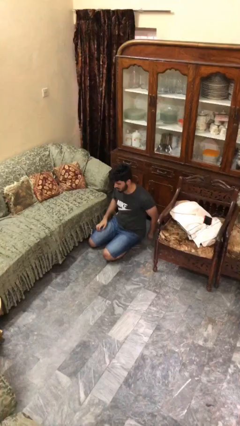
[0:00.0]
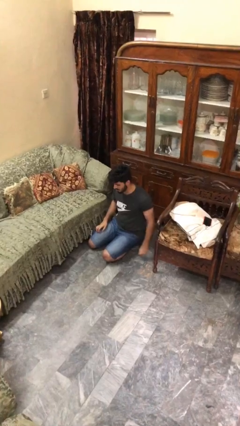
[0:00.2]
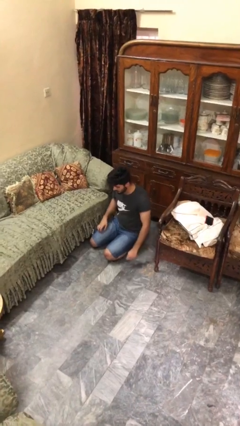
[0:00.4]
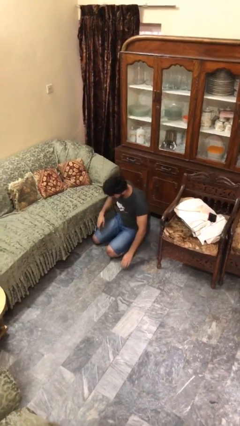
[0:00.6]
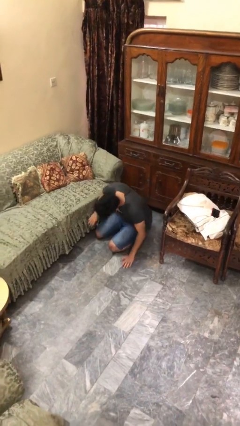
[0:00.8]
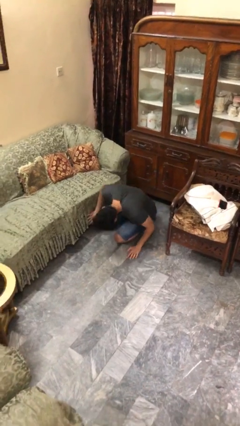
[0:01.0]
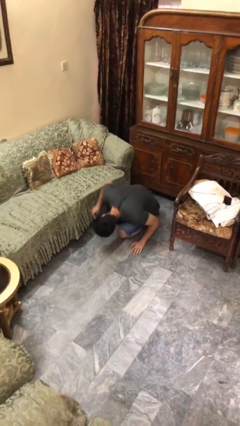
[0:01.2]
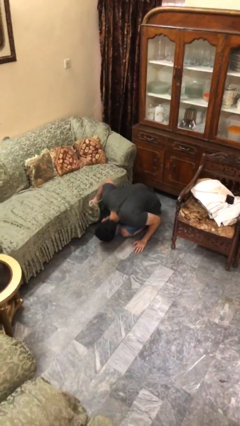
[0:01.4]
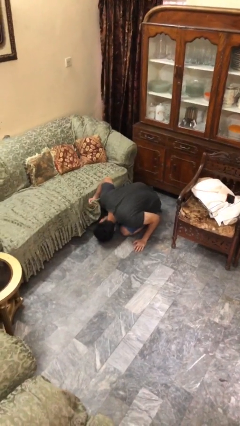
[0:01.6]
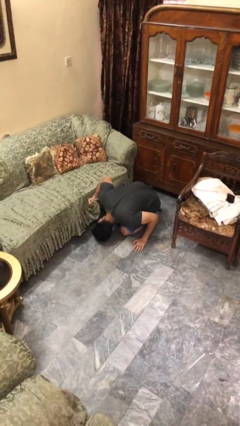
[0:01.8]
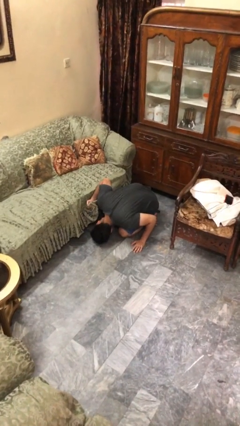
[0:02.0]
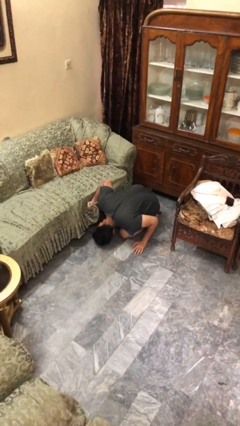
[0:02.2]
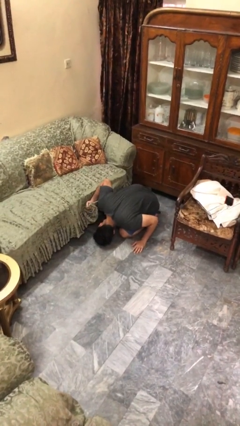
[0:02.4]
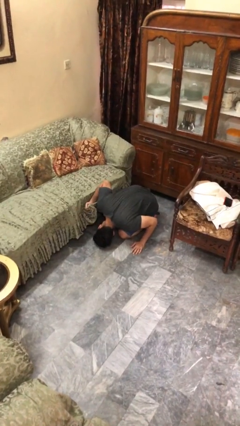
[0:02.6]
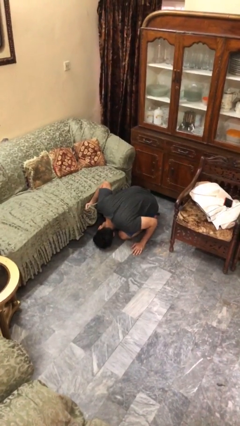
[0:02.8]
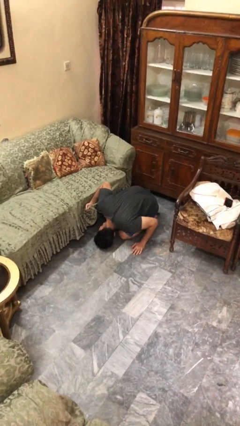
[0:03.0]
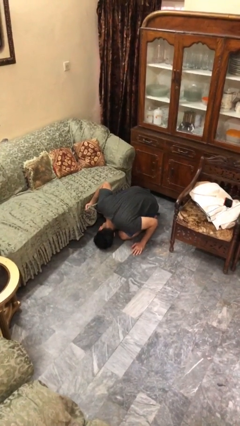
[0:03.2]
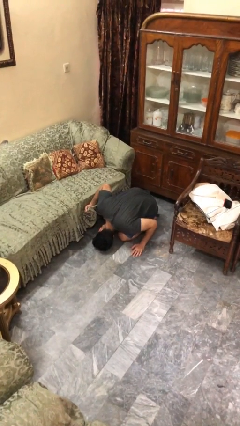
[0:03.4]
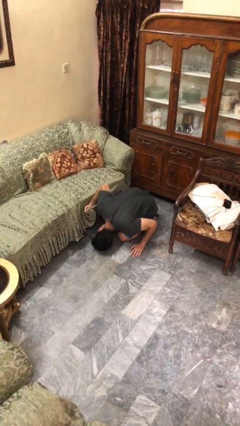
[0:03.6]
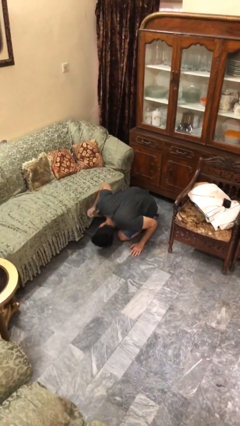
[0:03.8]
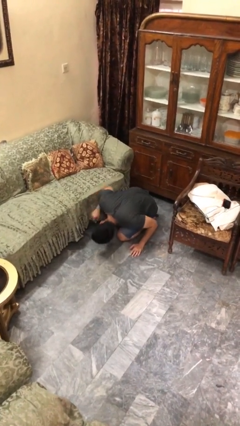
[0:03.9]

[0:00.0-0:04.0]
person searches under couch

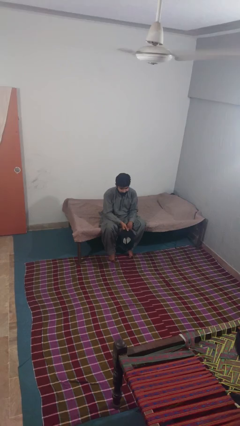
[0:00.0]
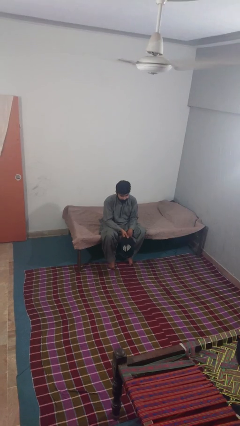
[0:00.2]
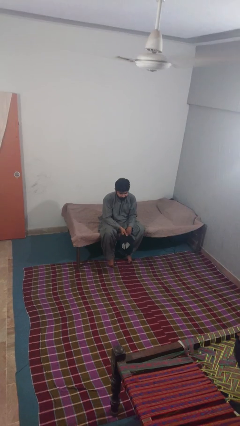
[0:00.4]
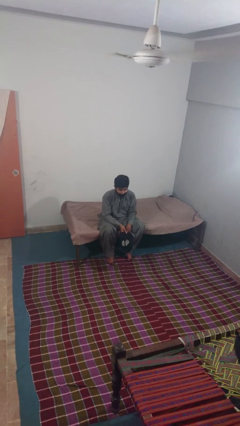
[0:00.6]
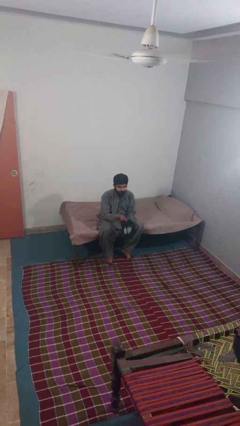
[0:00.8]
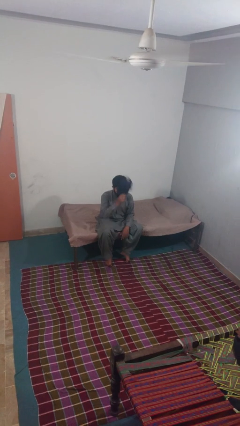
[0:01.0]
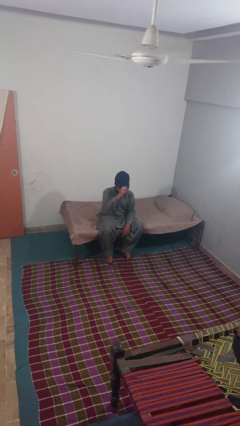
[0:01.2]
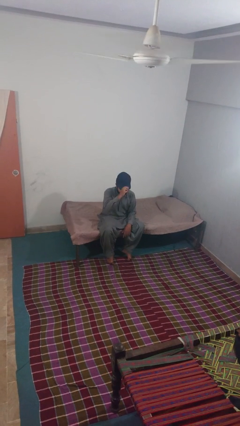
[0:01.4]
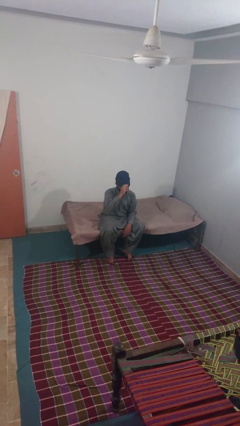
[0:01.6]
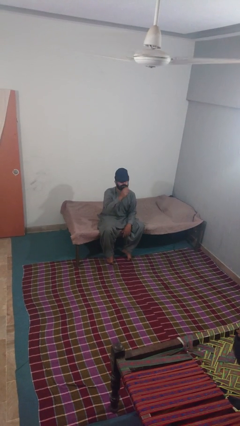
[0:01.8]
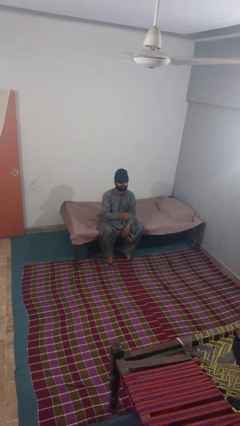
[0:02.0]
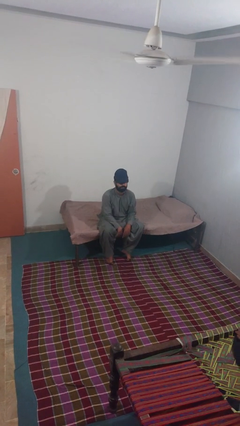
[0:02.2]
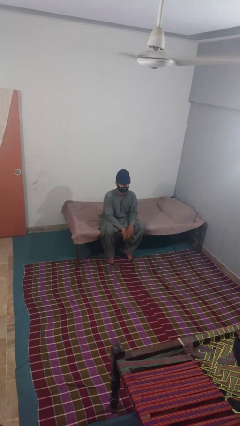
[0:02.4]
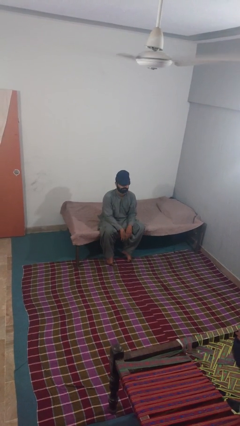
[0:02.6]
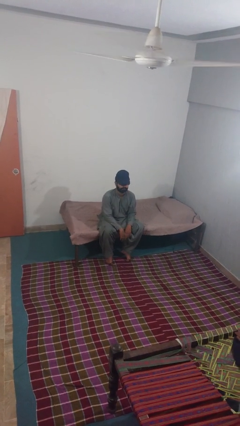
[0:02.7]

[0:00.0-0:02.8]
person puts on hat

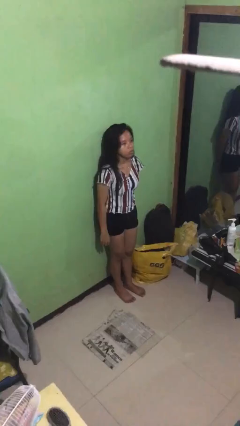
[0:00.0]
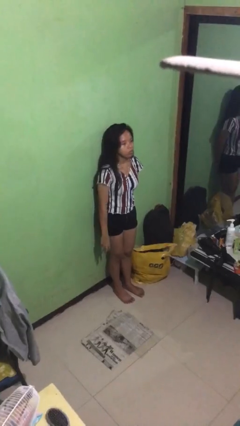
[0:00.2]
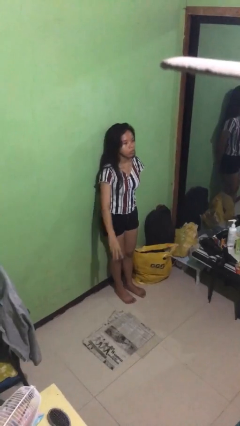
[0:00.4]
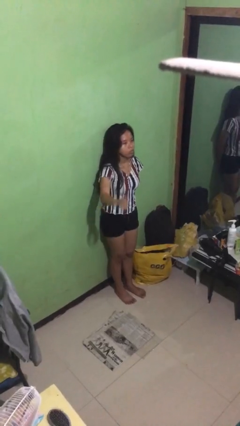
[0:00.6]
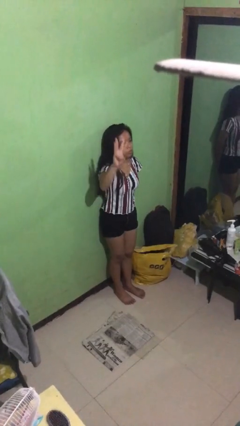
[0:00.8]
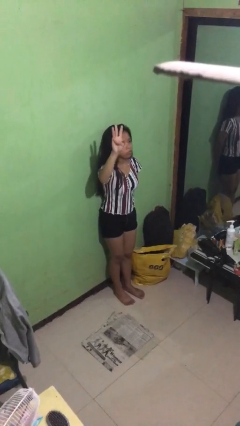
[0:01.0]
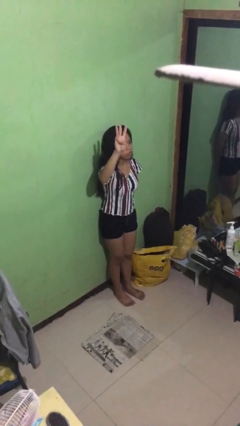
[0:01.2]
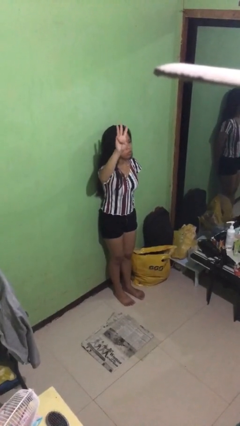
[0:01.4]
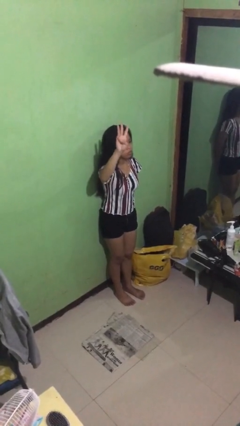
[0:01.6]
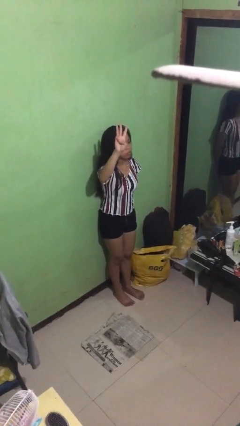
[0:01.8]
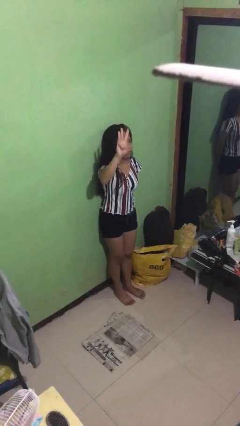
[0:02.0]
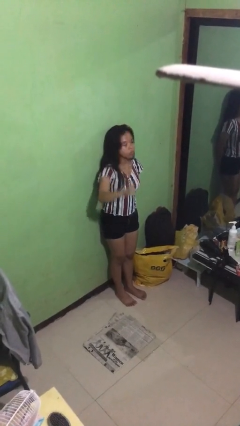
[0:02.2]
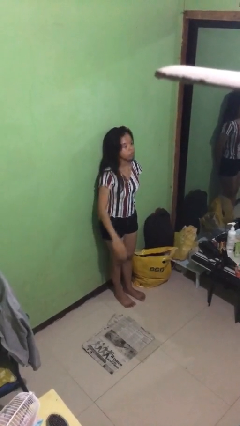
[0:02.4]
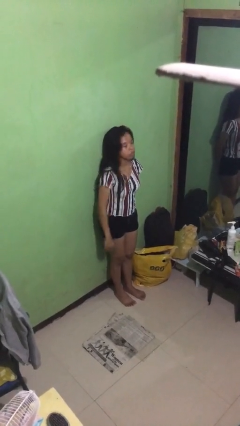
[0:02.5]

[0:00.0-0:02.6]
person gestures number three

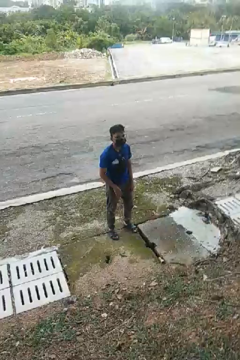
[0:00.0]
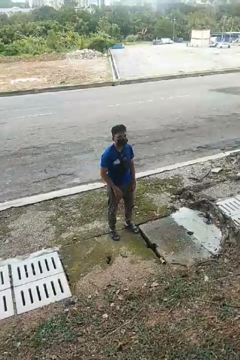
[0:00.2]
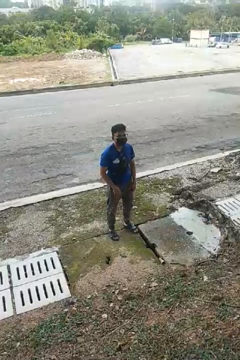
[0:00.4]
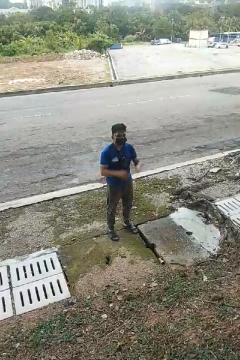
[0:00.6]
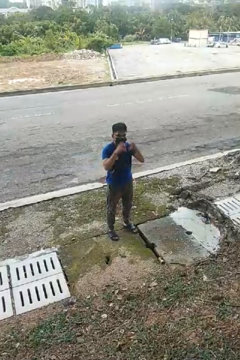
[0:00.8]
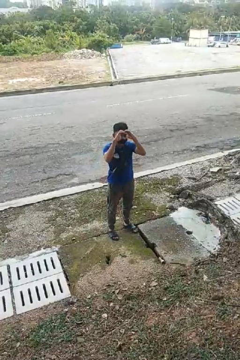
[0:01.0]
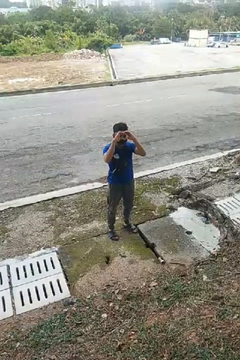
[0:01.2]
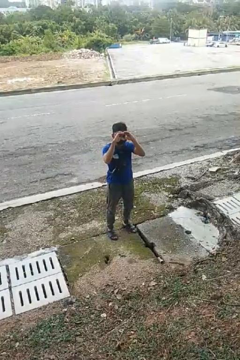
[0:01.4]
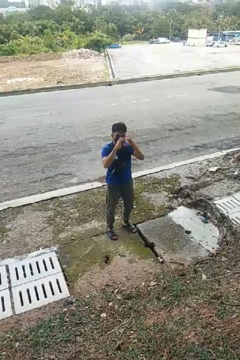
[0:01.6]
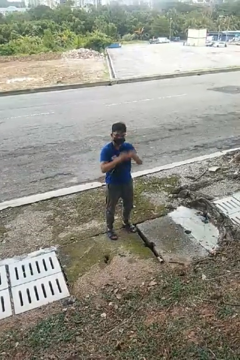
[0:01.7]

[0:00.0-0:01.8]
person gestures heart

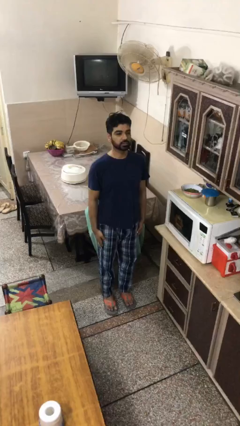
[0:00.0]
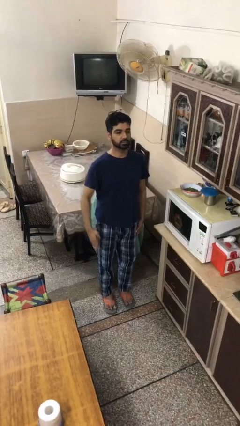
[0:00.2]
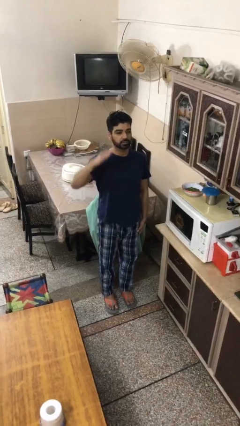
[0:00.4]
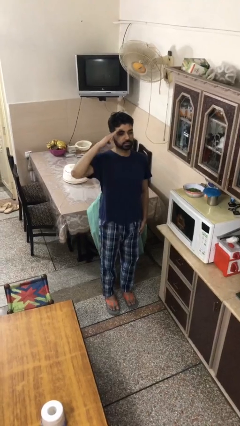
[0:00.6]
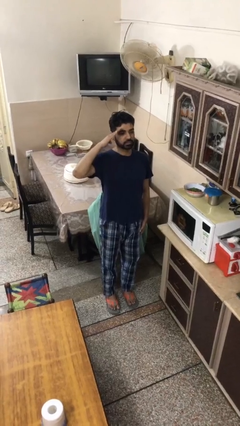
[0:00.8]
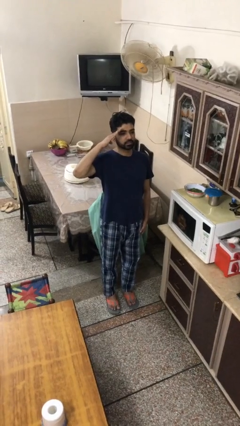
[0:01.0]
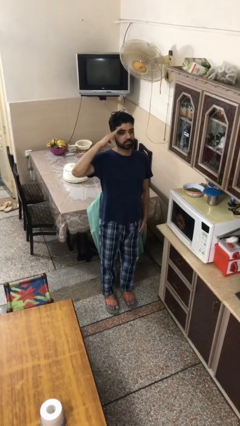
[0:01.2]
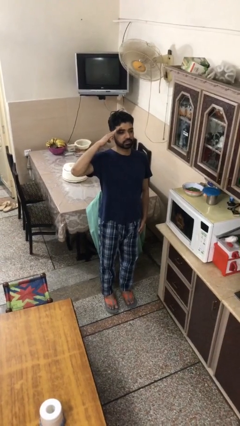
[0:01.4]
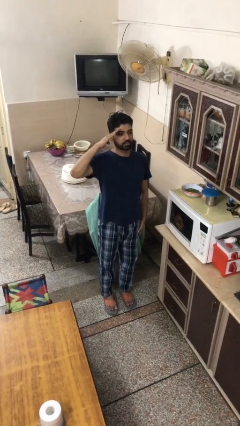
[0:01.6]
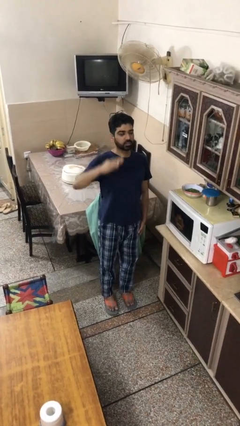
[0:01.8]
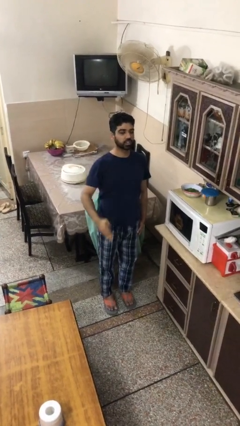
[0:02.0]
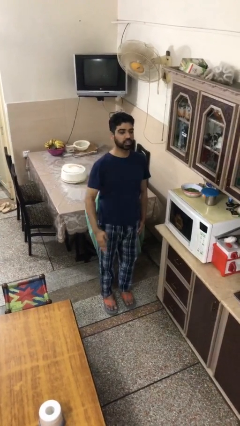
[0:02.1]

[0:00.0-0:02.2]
person salutes

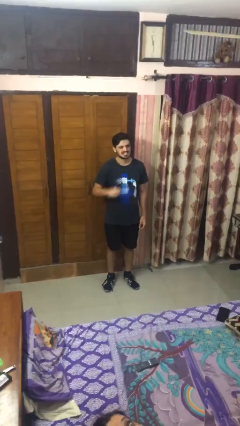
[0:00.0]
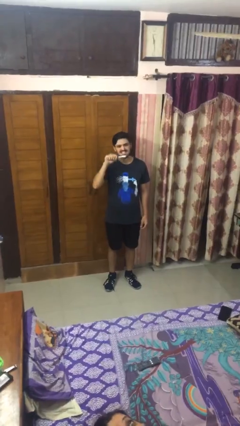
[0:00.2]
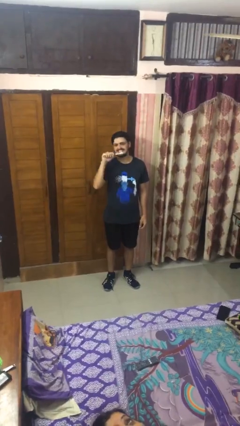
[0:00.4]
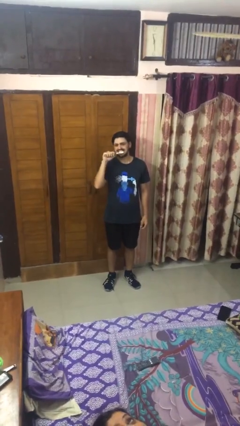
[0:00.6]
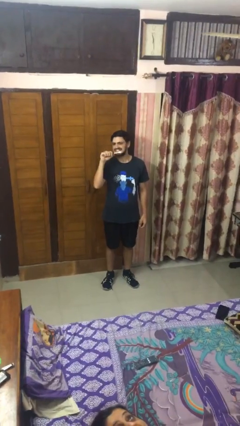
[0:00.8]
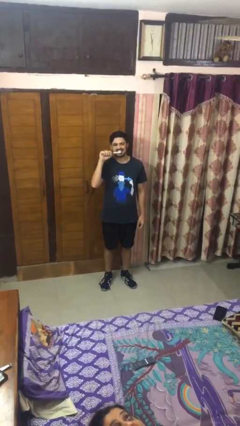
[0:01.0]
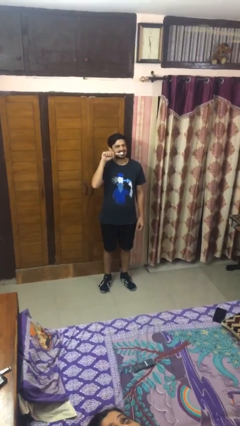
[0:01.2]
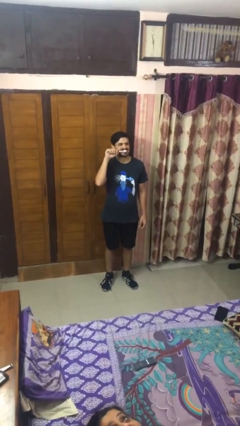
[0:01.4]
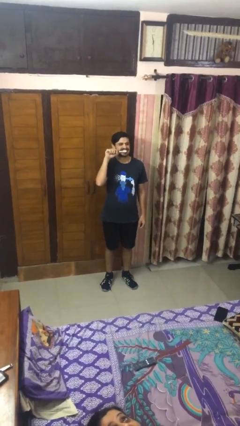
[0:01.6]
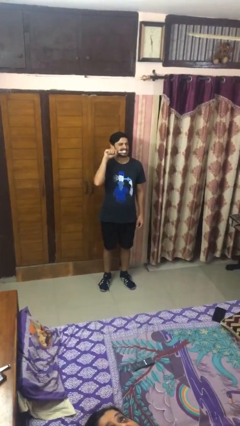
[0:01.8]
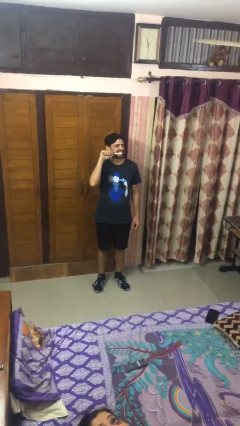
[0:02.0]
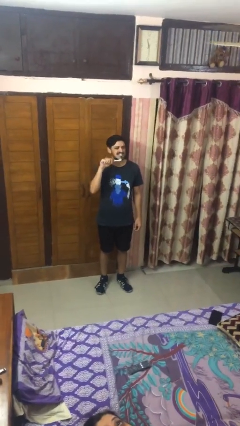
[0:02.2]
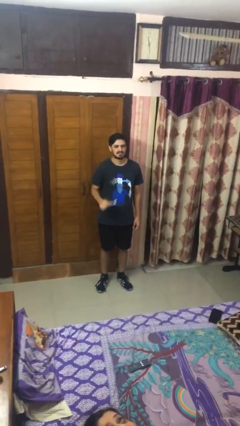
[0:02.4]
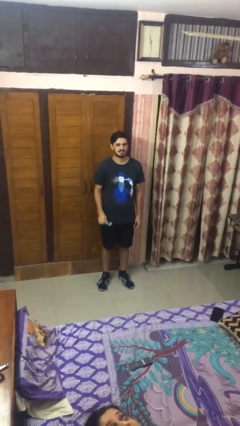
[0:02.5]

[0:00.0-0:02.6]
person brushes teeth

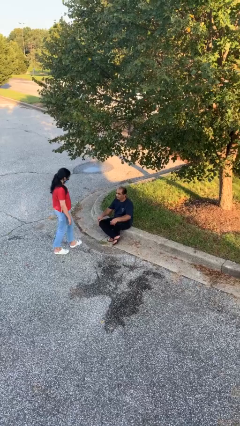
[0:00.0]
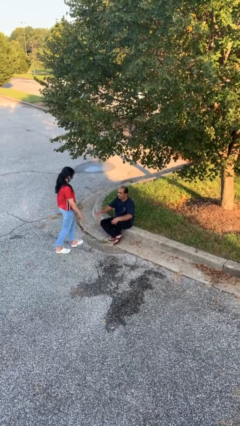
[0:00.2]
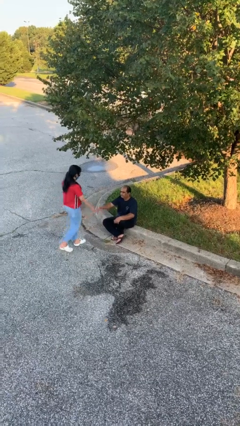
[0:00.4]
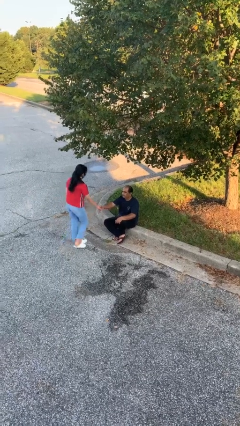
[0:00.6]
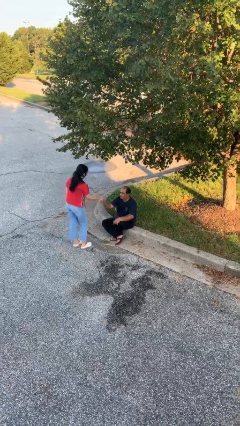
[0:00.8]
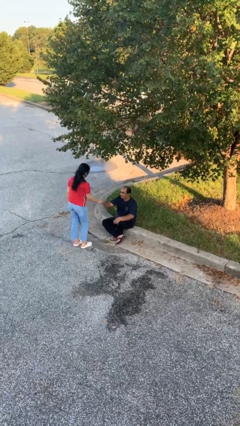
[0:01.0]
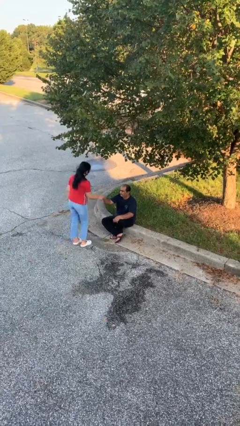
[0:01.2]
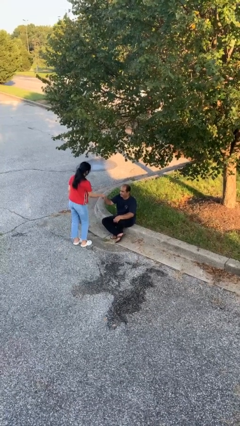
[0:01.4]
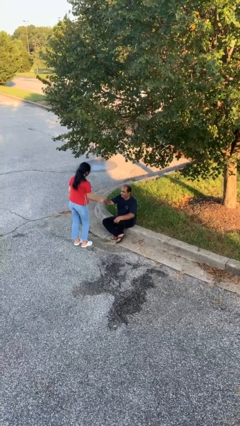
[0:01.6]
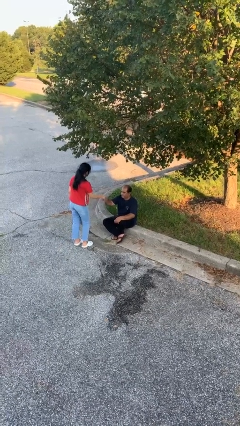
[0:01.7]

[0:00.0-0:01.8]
person shakes hand
